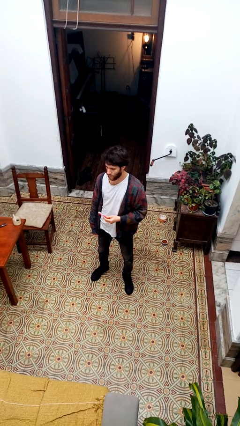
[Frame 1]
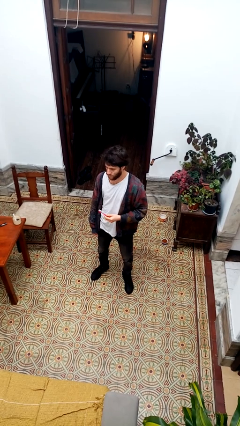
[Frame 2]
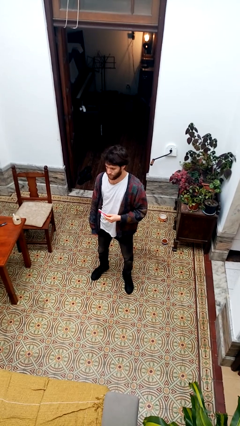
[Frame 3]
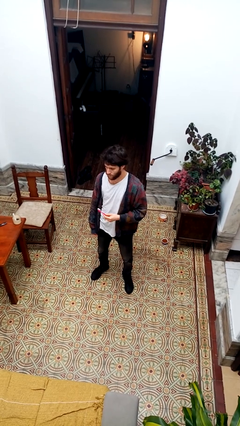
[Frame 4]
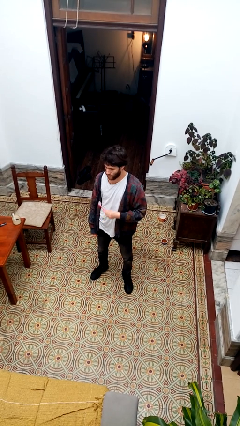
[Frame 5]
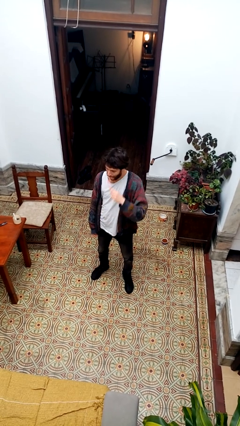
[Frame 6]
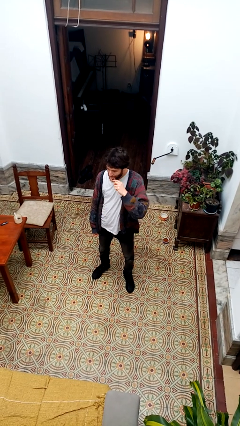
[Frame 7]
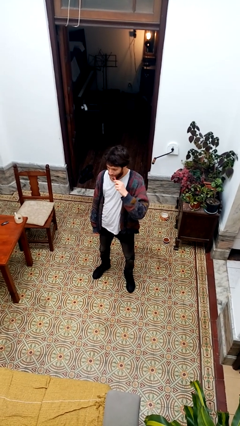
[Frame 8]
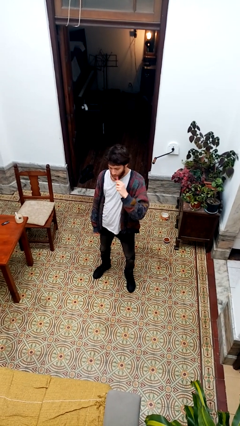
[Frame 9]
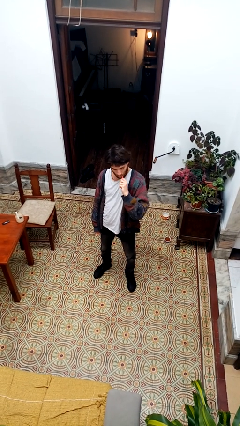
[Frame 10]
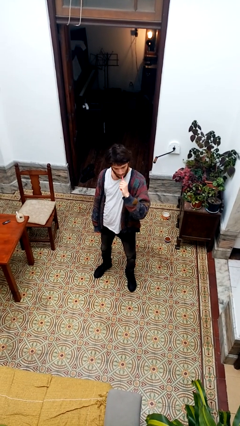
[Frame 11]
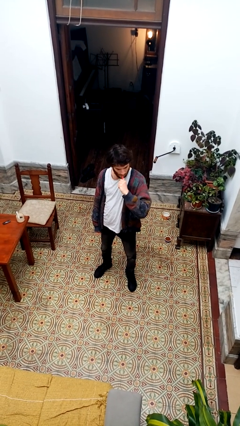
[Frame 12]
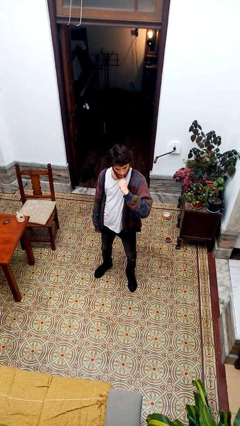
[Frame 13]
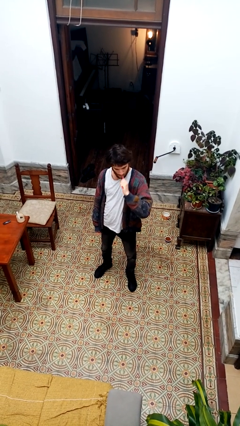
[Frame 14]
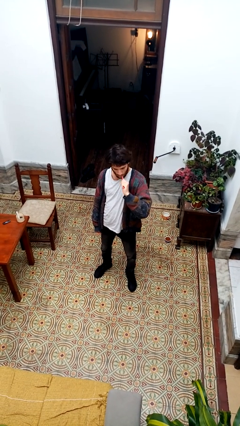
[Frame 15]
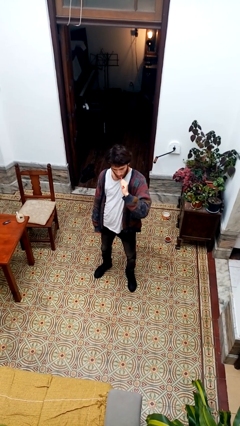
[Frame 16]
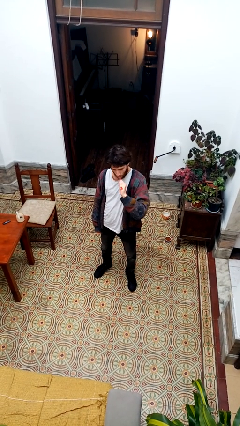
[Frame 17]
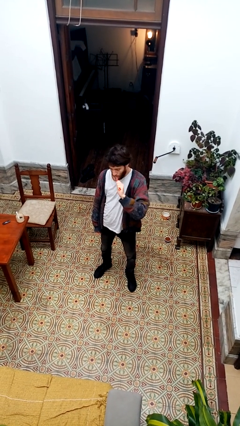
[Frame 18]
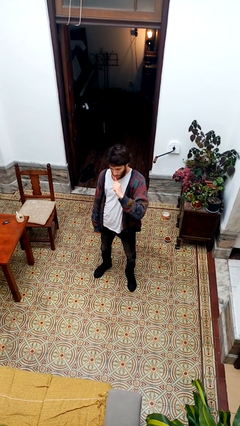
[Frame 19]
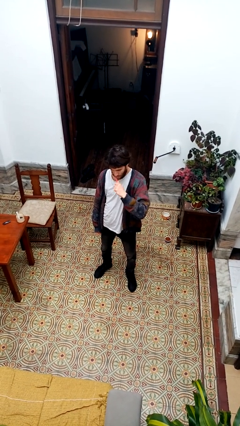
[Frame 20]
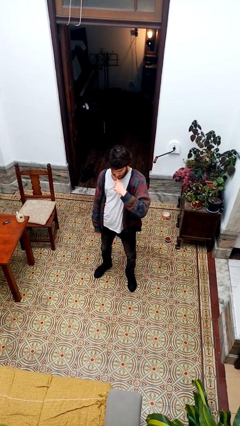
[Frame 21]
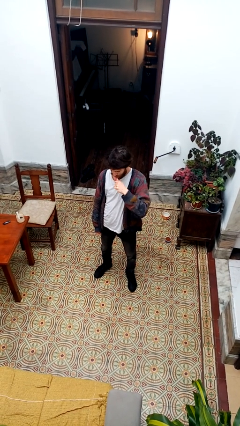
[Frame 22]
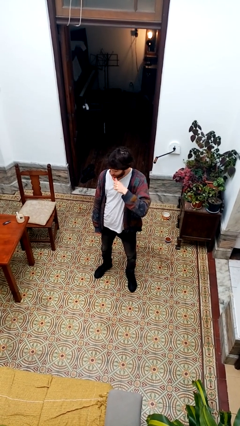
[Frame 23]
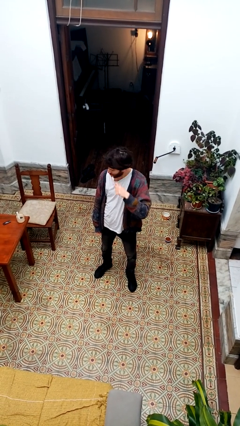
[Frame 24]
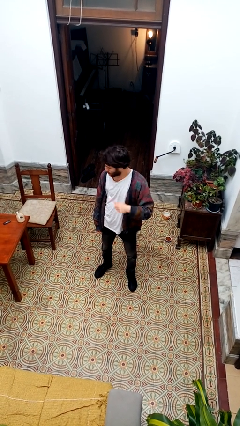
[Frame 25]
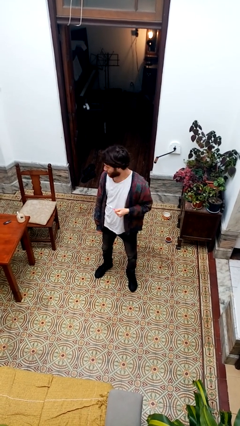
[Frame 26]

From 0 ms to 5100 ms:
person brushes teeth

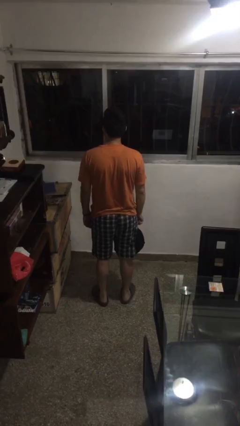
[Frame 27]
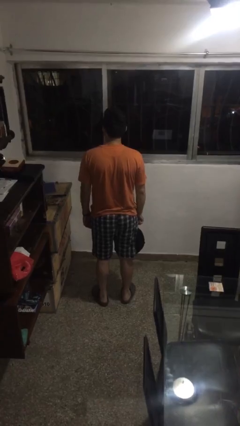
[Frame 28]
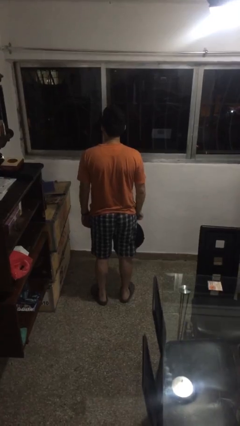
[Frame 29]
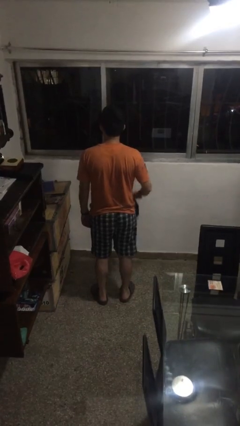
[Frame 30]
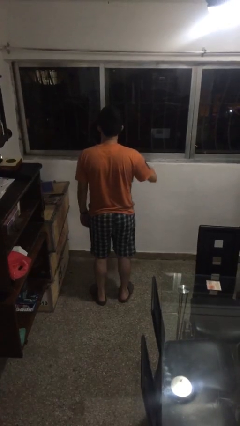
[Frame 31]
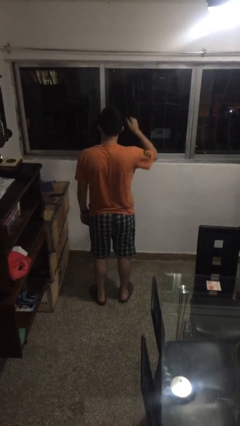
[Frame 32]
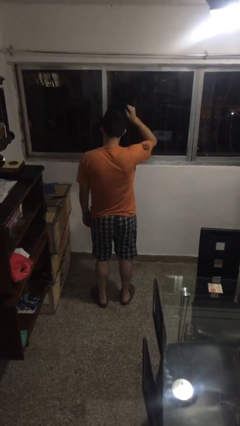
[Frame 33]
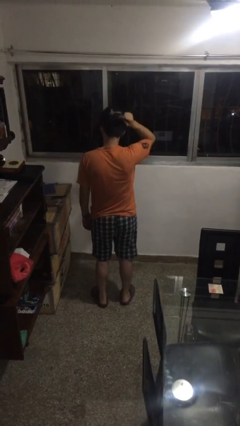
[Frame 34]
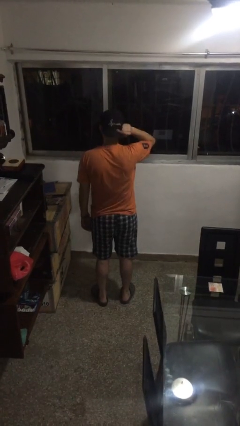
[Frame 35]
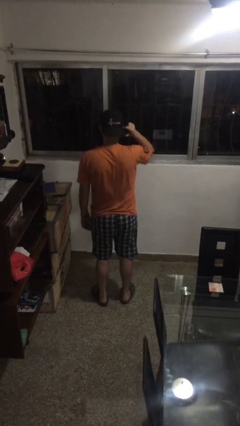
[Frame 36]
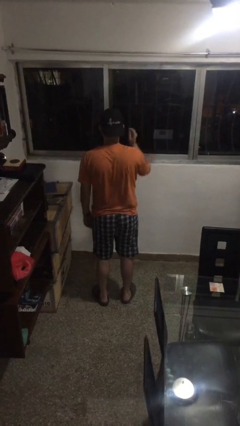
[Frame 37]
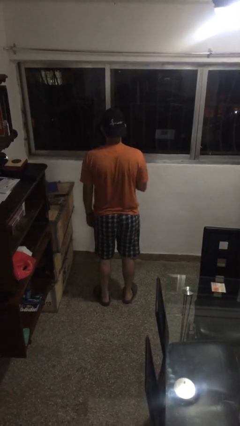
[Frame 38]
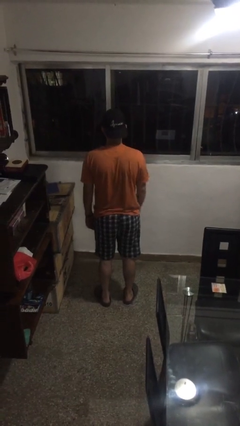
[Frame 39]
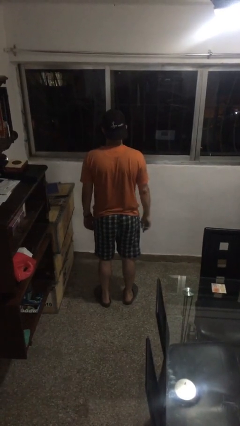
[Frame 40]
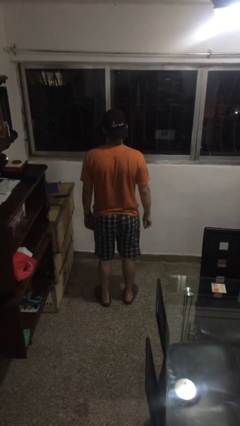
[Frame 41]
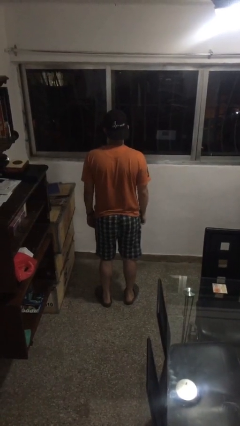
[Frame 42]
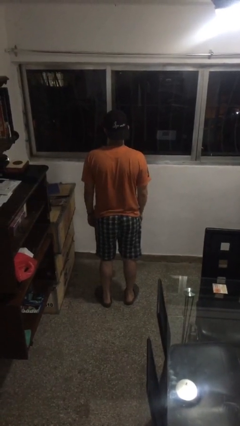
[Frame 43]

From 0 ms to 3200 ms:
person puts on hat

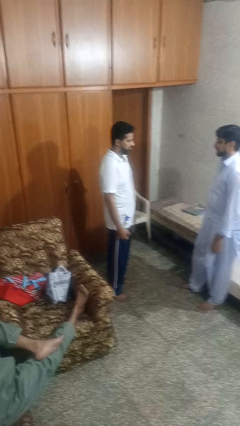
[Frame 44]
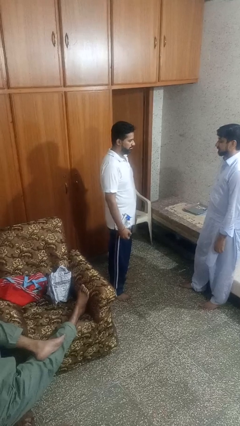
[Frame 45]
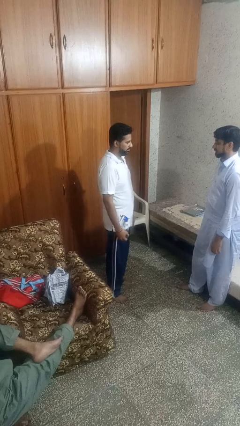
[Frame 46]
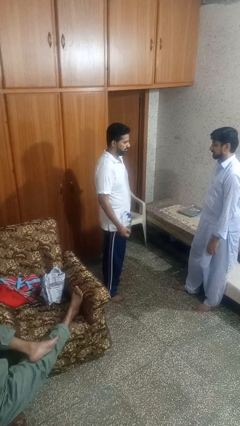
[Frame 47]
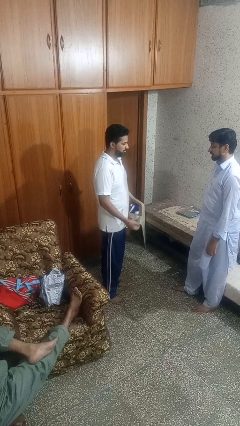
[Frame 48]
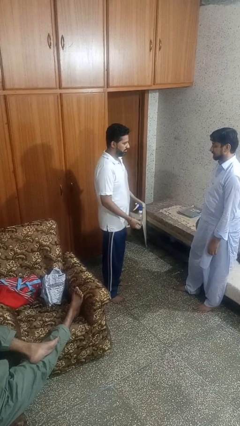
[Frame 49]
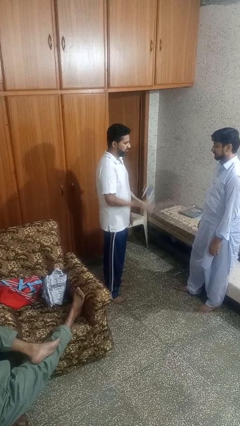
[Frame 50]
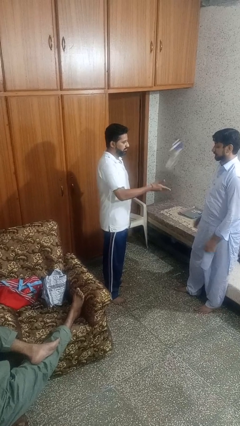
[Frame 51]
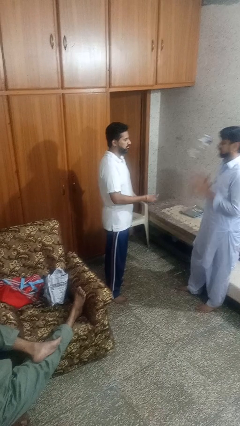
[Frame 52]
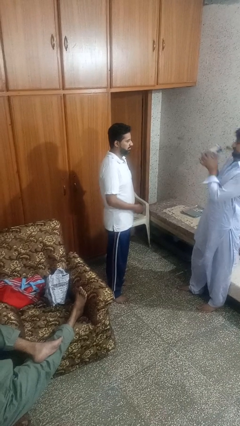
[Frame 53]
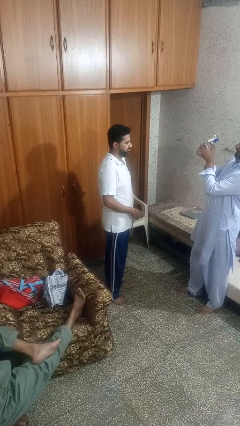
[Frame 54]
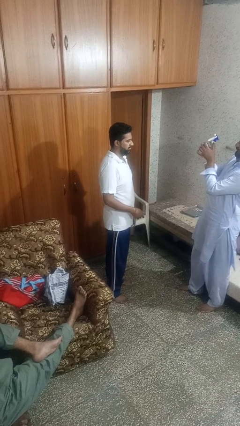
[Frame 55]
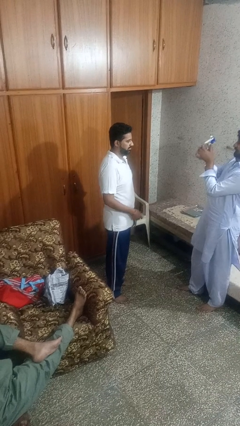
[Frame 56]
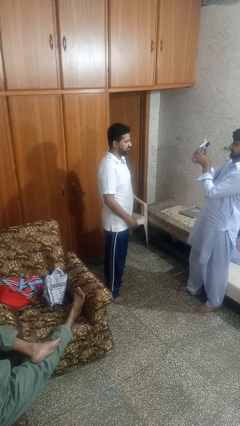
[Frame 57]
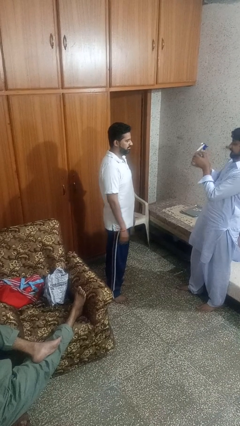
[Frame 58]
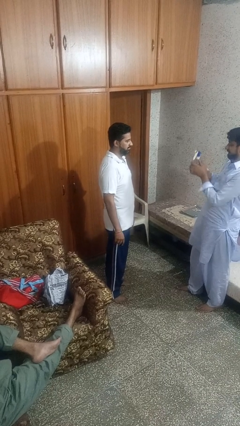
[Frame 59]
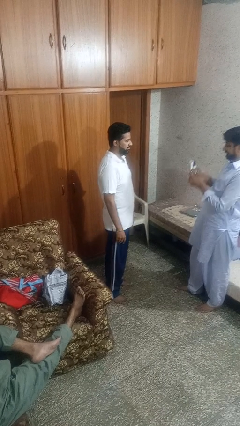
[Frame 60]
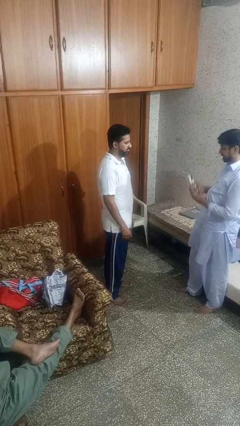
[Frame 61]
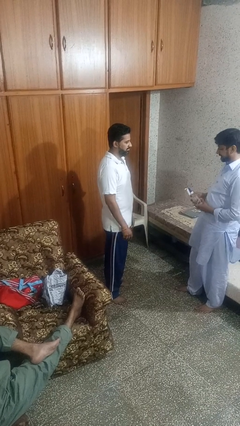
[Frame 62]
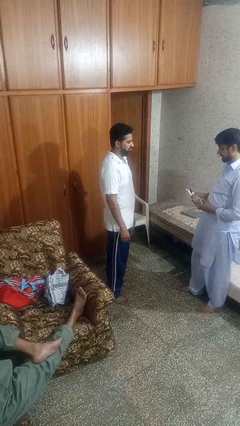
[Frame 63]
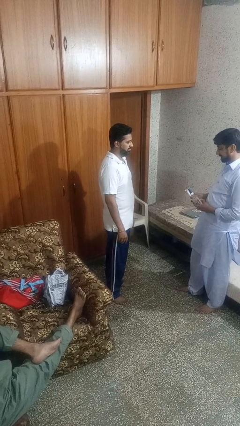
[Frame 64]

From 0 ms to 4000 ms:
person throws object to person

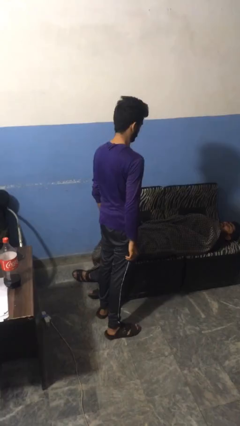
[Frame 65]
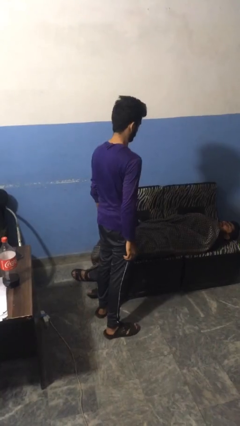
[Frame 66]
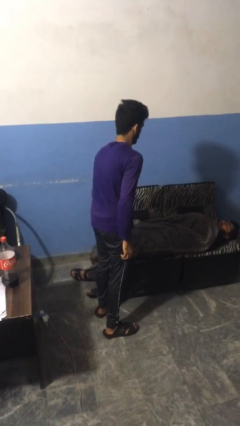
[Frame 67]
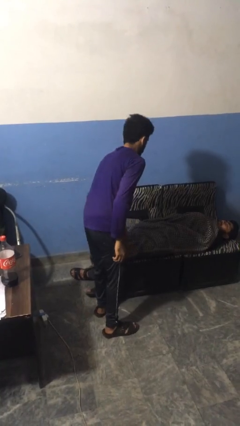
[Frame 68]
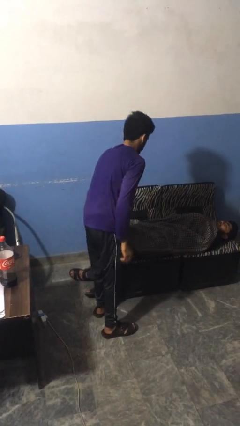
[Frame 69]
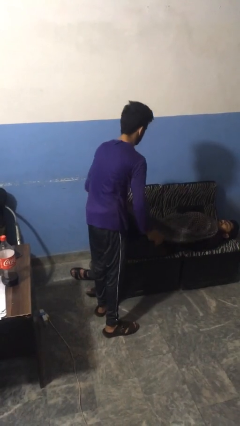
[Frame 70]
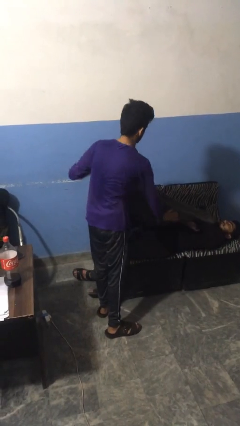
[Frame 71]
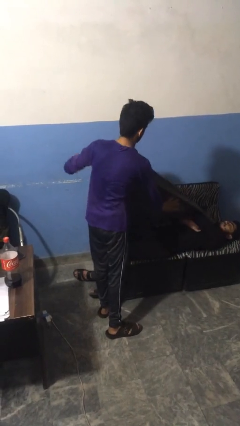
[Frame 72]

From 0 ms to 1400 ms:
person uncovers friend with blanket

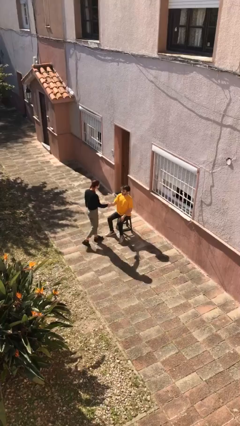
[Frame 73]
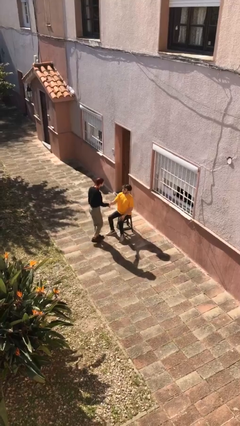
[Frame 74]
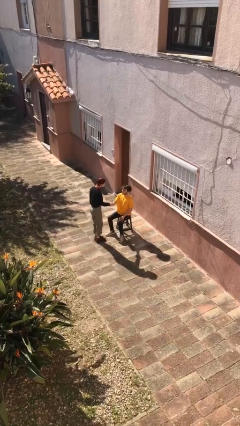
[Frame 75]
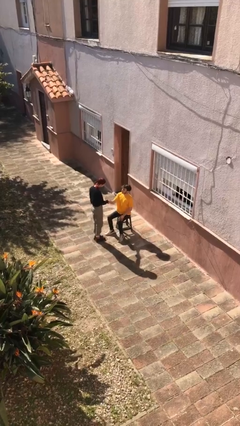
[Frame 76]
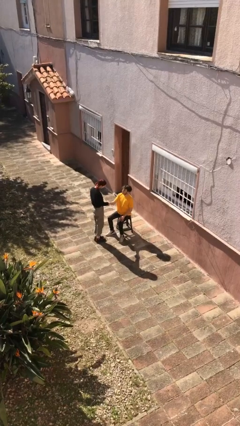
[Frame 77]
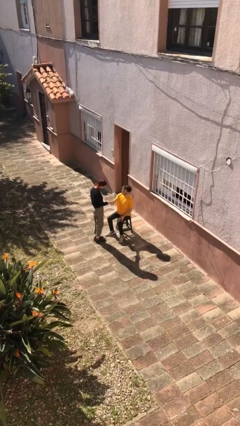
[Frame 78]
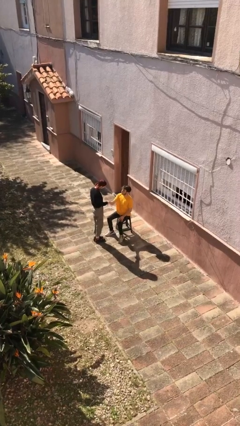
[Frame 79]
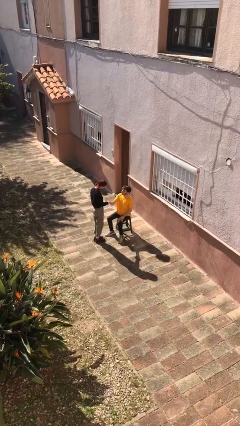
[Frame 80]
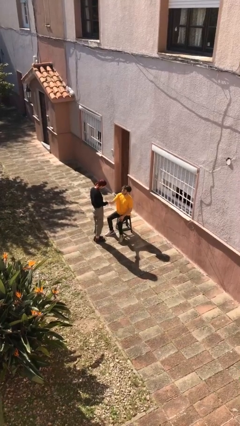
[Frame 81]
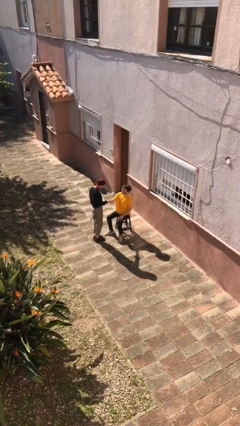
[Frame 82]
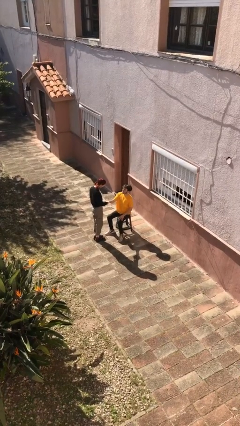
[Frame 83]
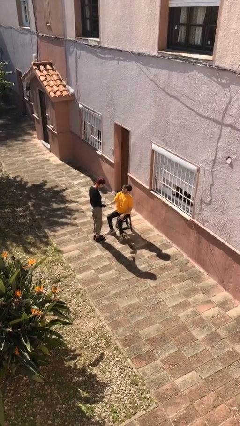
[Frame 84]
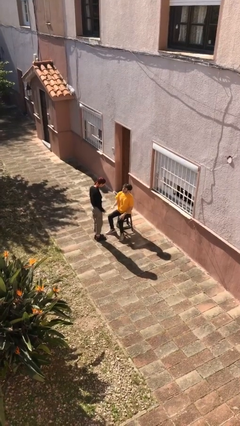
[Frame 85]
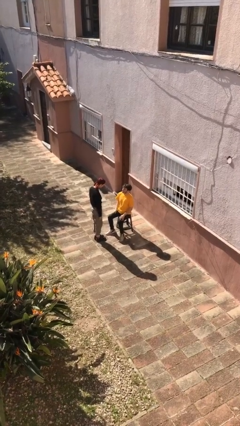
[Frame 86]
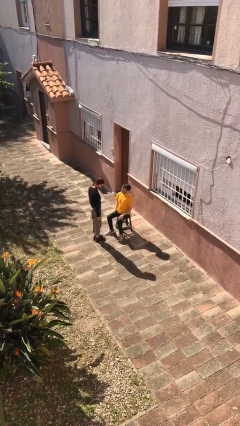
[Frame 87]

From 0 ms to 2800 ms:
person shakes hand

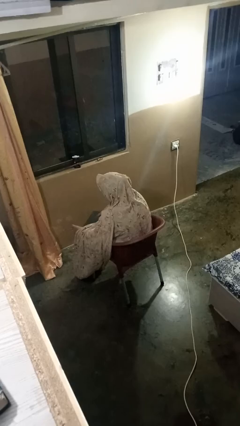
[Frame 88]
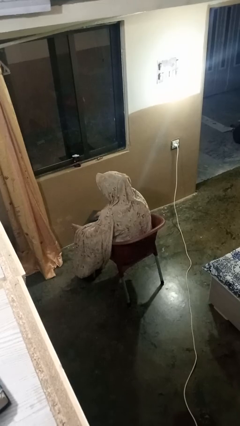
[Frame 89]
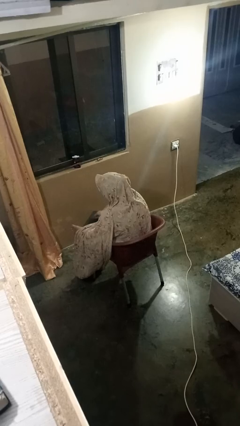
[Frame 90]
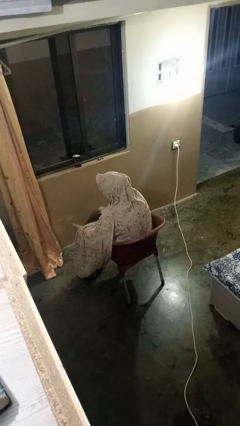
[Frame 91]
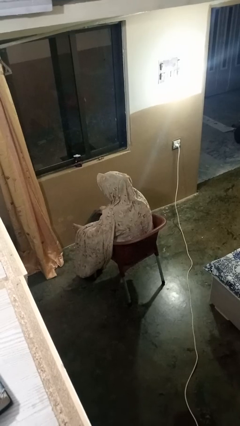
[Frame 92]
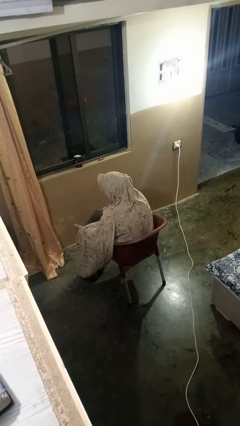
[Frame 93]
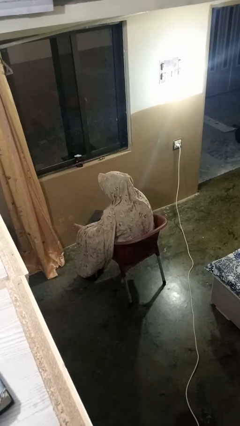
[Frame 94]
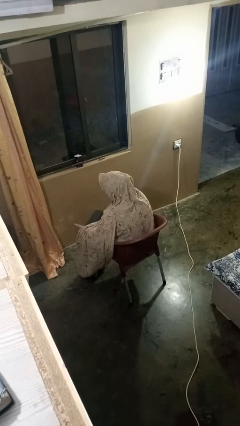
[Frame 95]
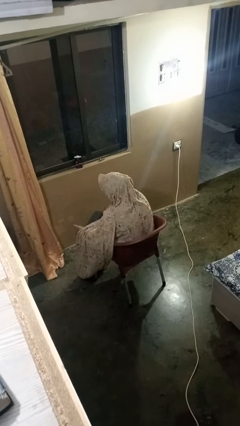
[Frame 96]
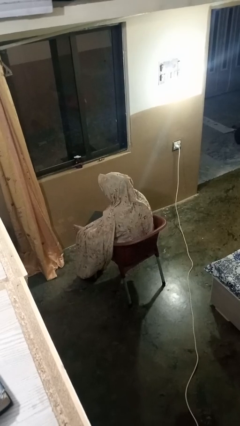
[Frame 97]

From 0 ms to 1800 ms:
person interacts with tablet
